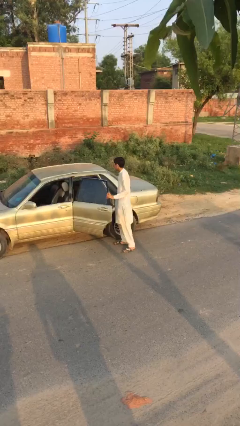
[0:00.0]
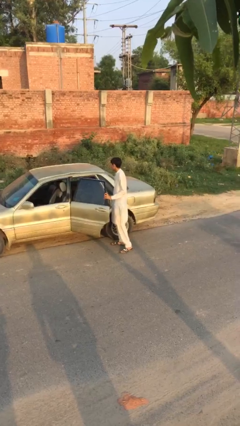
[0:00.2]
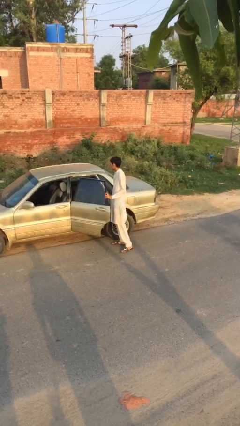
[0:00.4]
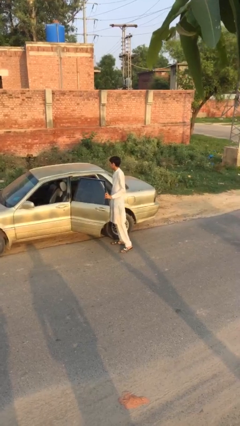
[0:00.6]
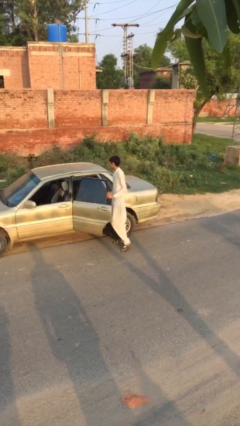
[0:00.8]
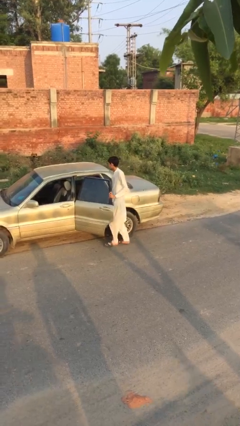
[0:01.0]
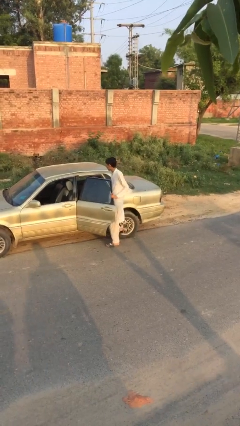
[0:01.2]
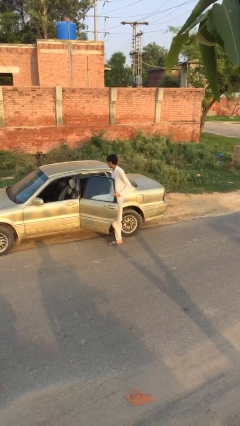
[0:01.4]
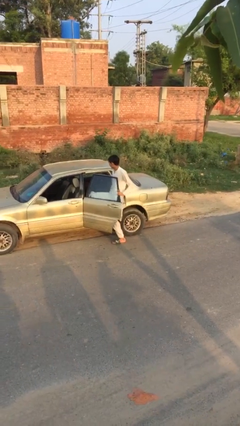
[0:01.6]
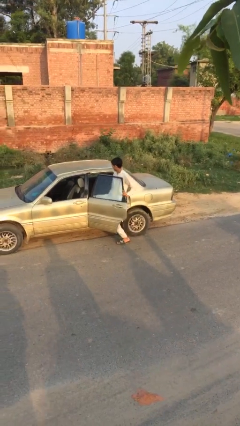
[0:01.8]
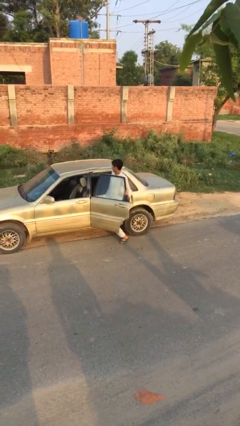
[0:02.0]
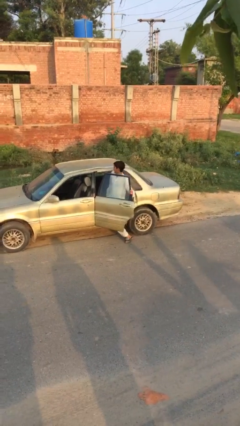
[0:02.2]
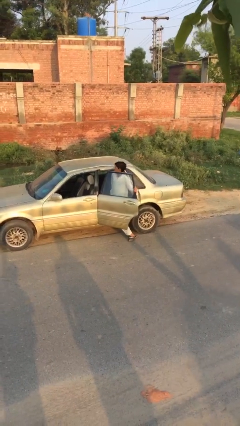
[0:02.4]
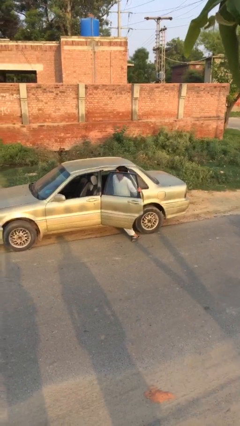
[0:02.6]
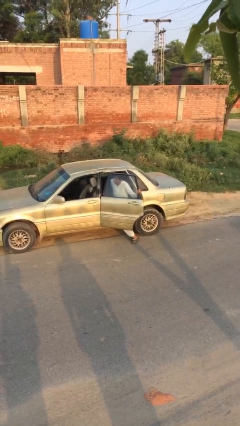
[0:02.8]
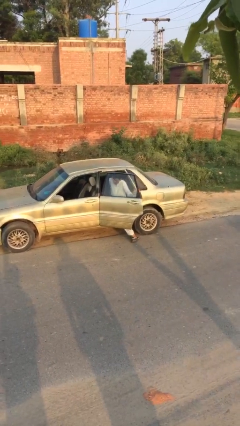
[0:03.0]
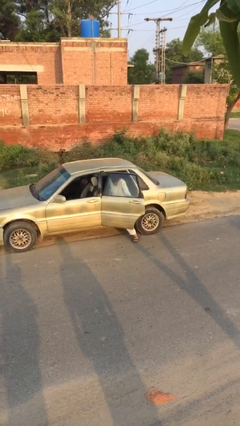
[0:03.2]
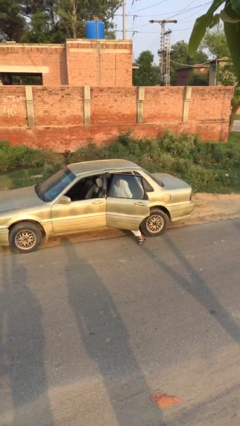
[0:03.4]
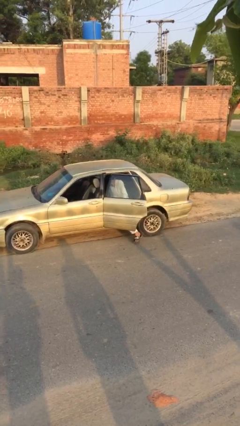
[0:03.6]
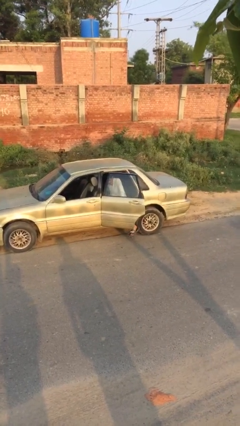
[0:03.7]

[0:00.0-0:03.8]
person enters car

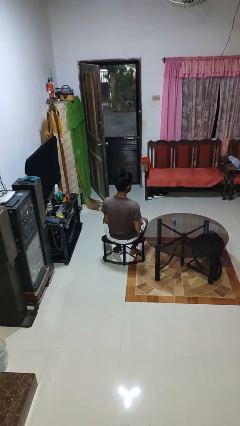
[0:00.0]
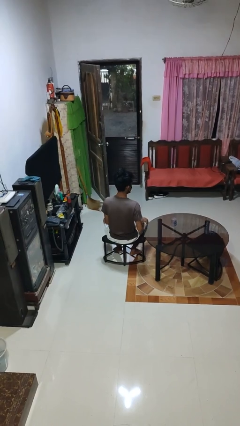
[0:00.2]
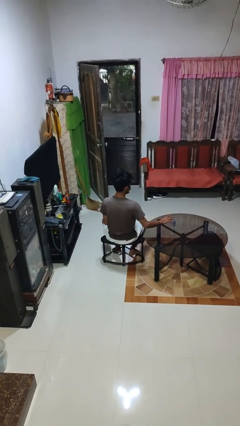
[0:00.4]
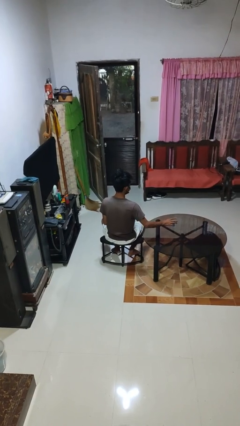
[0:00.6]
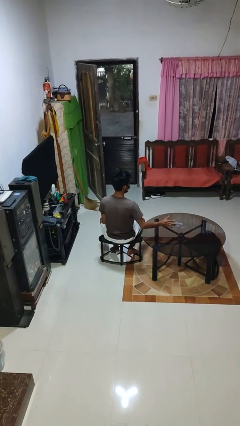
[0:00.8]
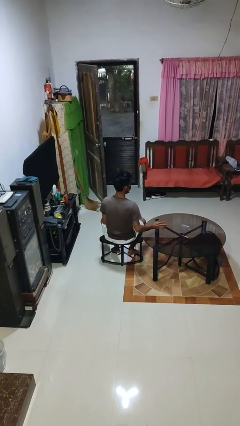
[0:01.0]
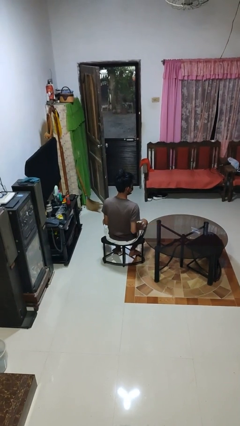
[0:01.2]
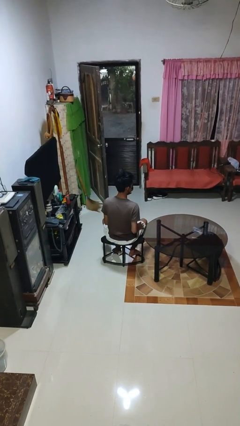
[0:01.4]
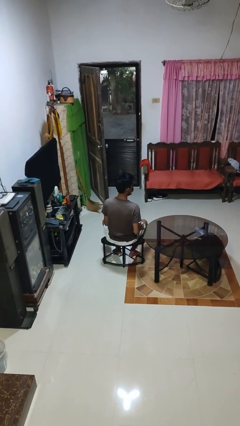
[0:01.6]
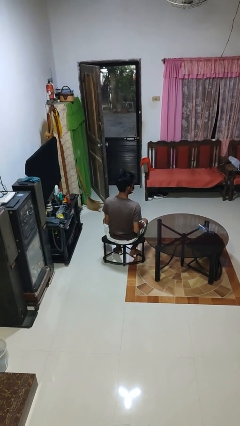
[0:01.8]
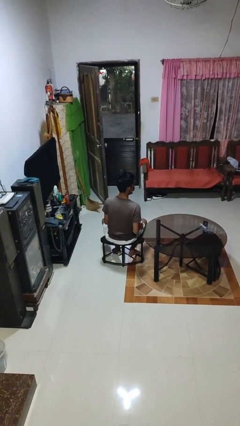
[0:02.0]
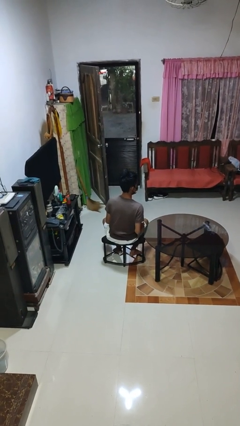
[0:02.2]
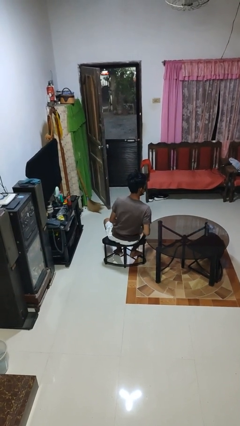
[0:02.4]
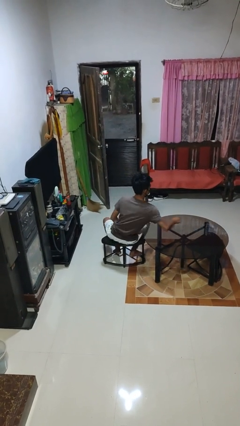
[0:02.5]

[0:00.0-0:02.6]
person knocks over glass

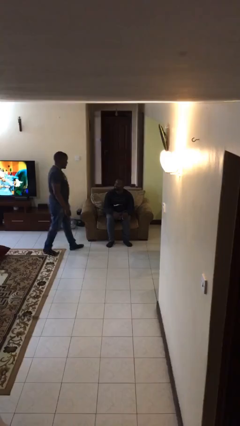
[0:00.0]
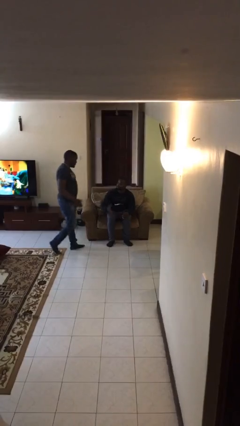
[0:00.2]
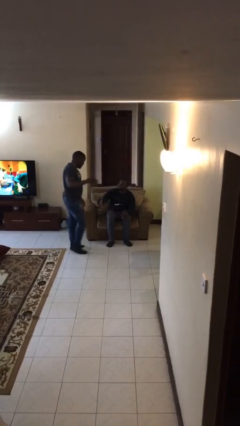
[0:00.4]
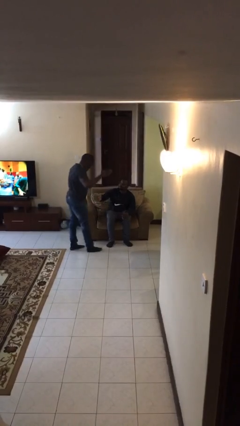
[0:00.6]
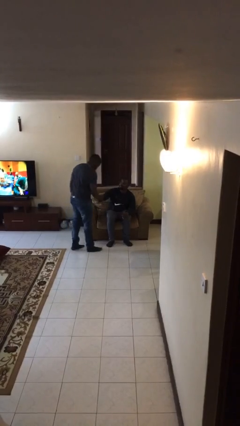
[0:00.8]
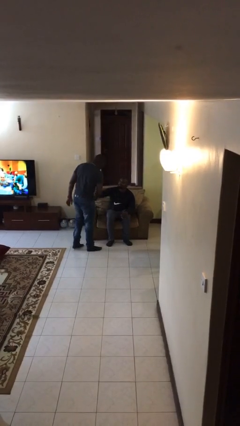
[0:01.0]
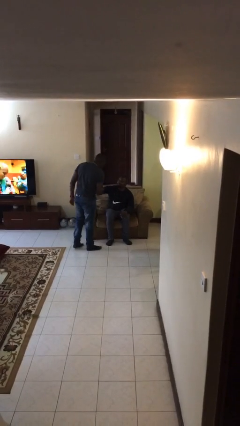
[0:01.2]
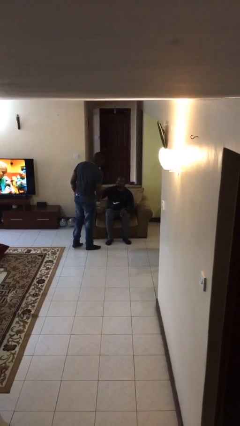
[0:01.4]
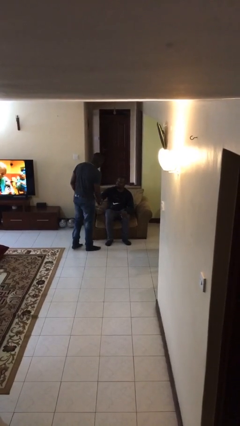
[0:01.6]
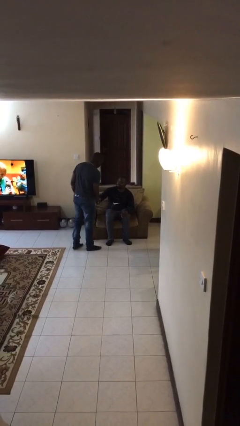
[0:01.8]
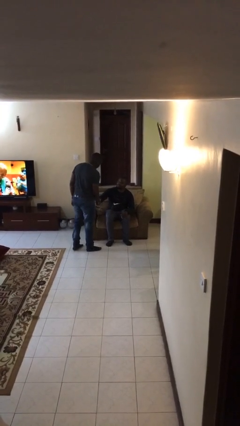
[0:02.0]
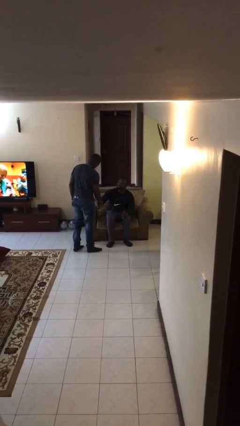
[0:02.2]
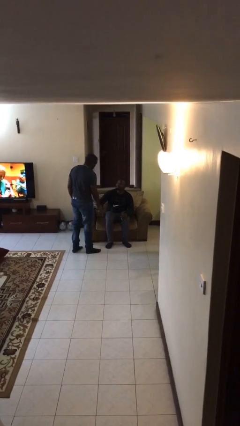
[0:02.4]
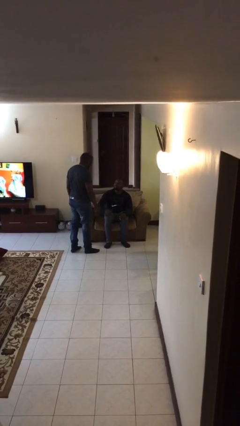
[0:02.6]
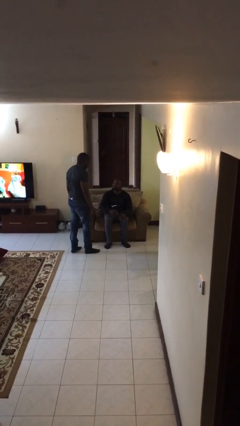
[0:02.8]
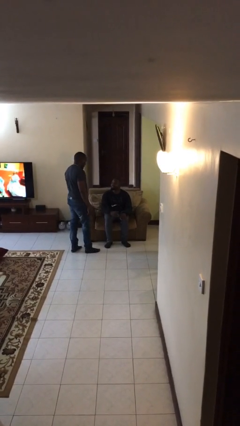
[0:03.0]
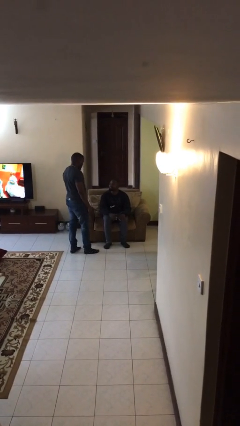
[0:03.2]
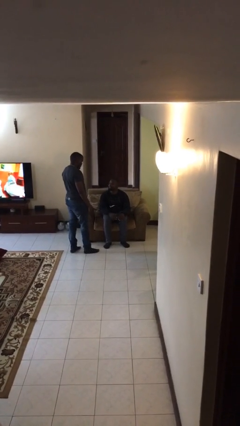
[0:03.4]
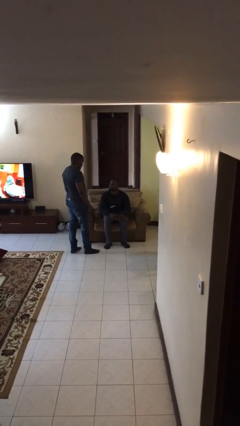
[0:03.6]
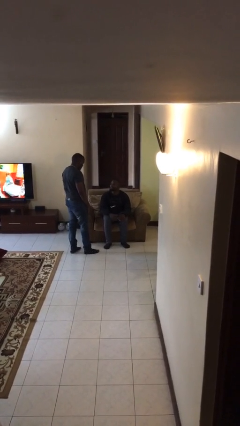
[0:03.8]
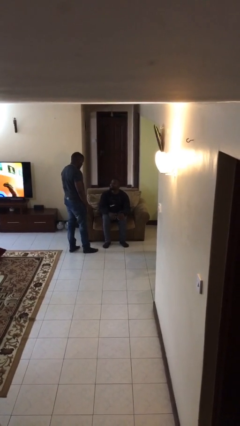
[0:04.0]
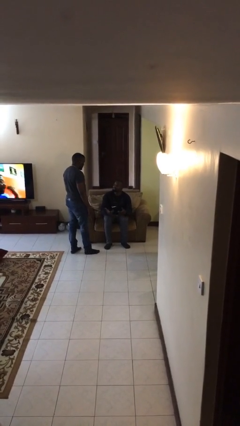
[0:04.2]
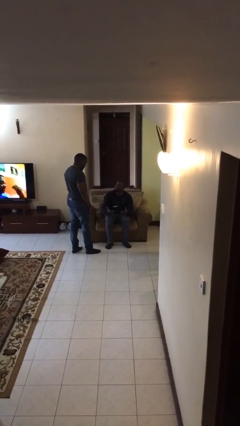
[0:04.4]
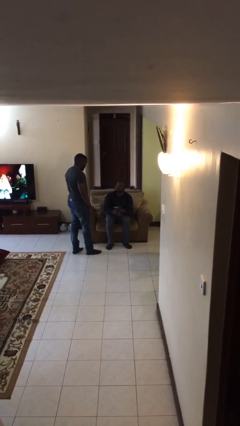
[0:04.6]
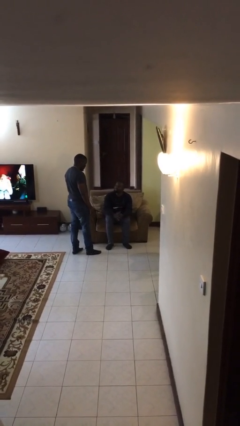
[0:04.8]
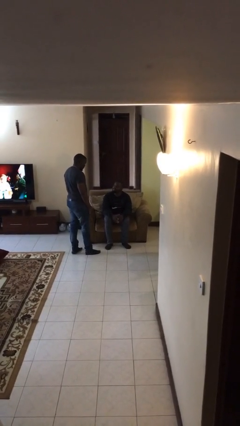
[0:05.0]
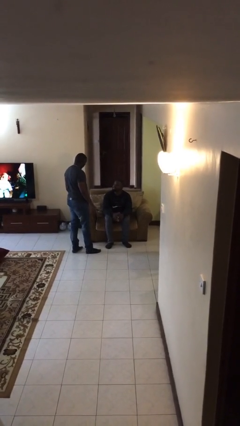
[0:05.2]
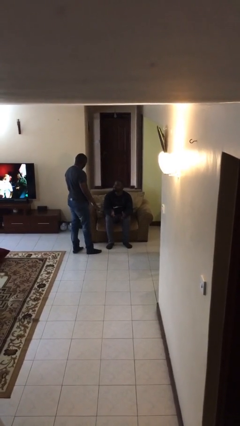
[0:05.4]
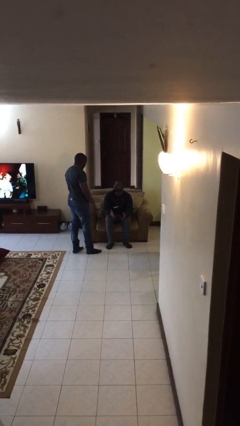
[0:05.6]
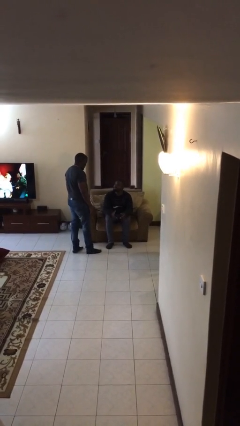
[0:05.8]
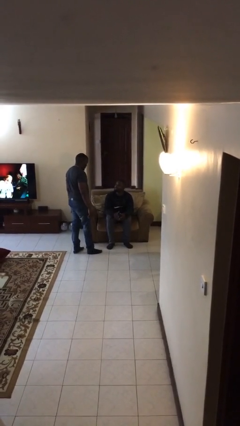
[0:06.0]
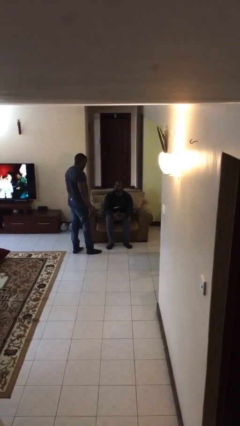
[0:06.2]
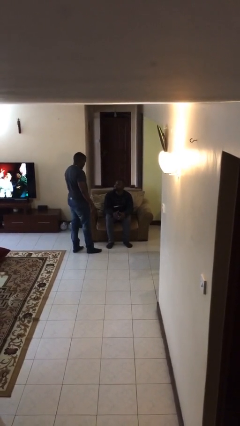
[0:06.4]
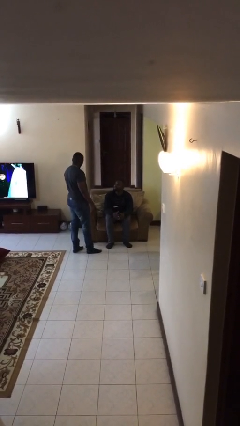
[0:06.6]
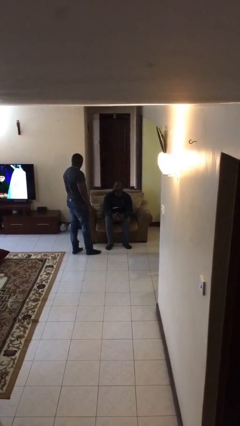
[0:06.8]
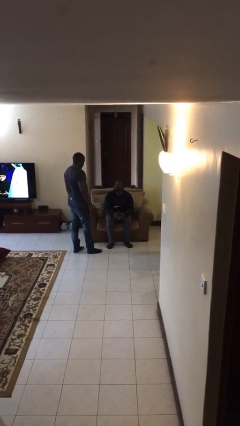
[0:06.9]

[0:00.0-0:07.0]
person shakes hand

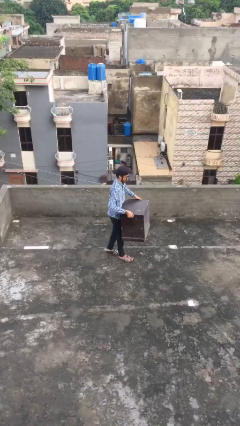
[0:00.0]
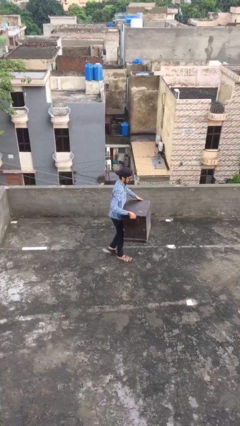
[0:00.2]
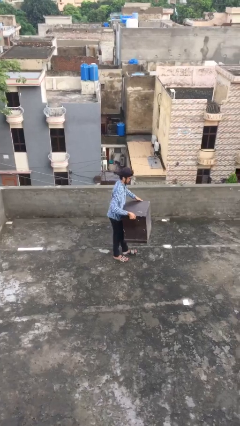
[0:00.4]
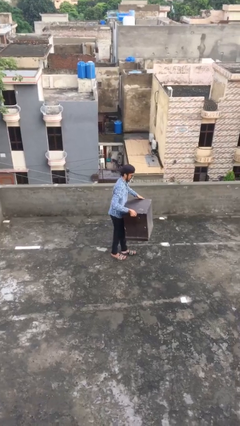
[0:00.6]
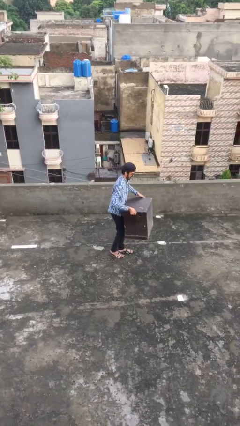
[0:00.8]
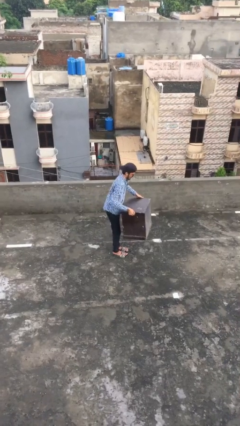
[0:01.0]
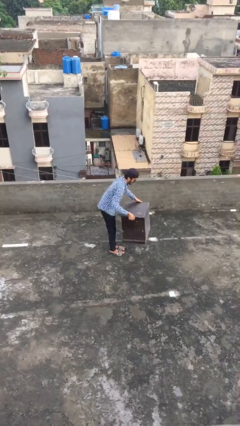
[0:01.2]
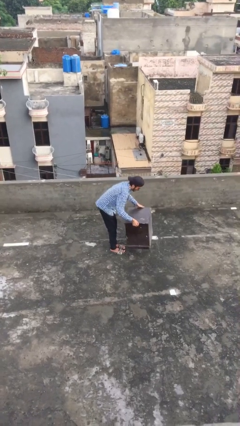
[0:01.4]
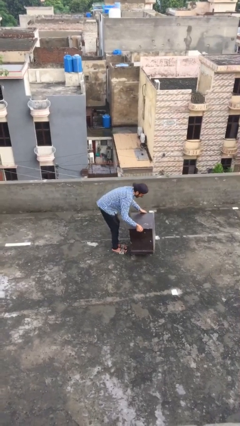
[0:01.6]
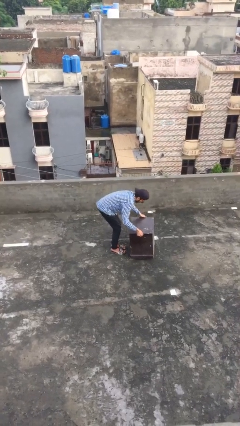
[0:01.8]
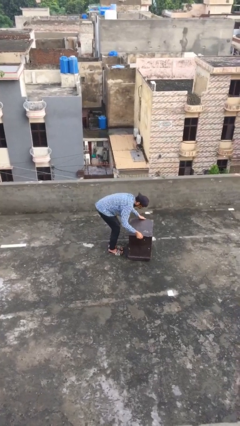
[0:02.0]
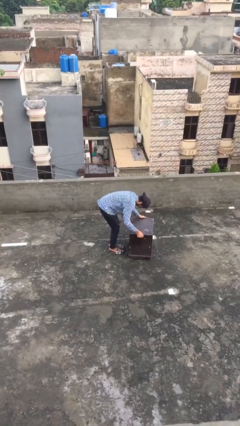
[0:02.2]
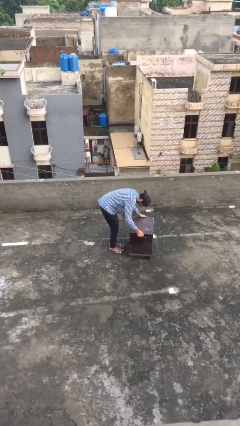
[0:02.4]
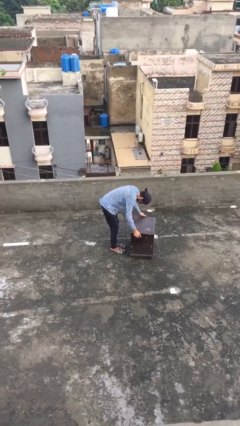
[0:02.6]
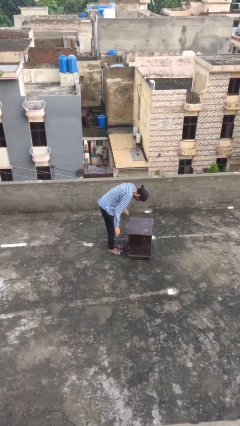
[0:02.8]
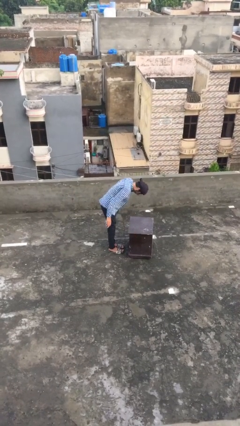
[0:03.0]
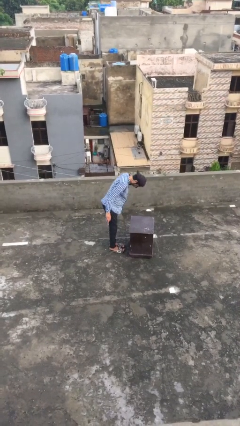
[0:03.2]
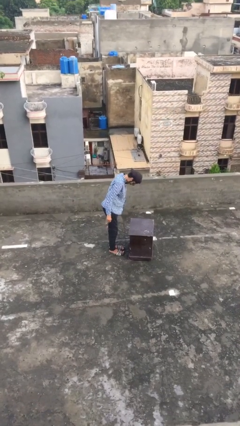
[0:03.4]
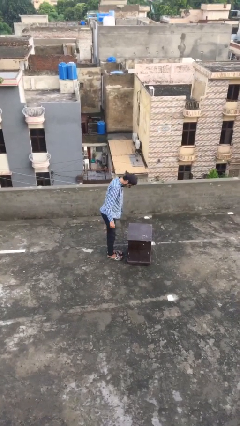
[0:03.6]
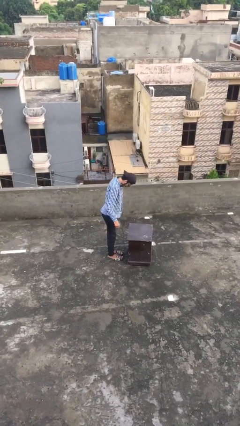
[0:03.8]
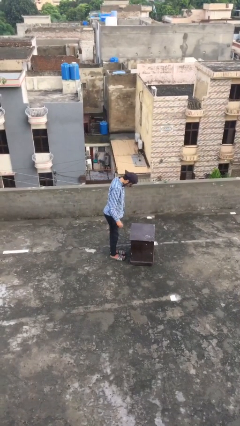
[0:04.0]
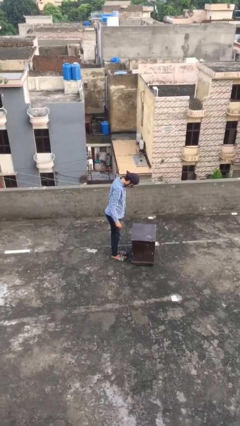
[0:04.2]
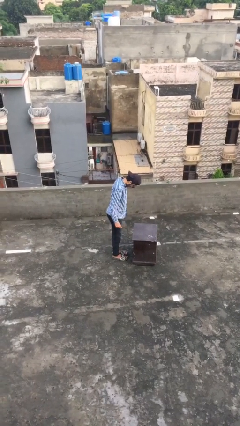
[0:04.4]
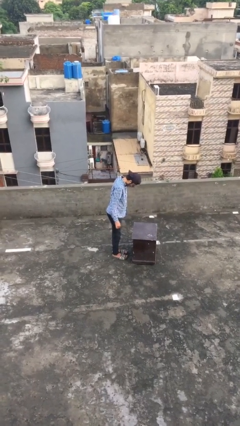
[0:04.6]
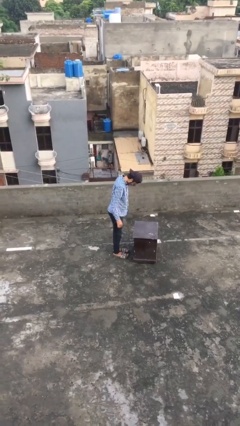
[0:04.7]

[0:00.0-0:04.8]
person puts down object on floor
